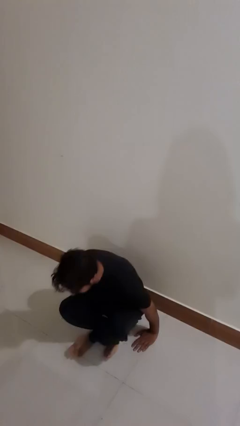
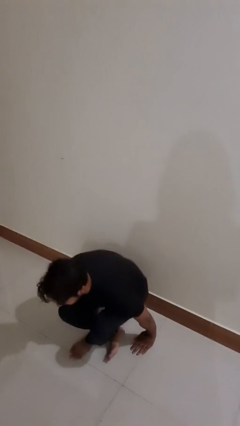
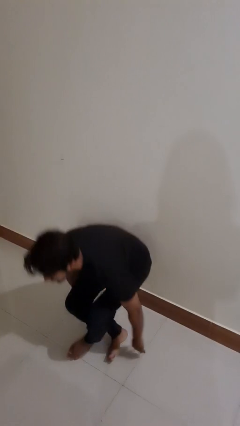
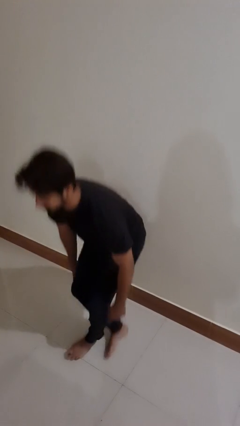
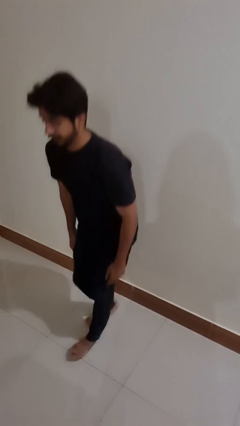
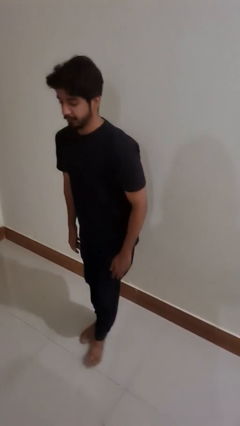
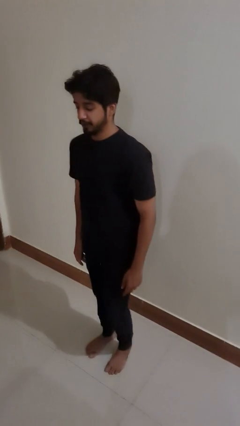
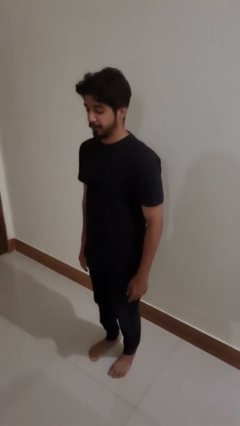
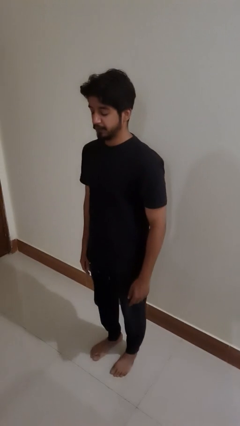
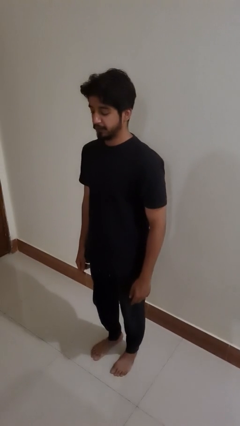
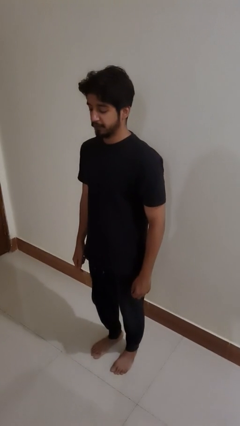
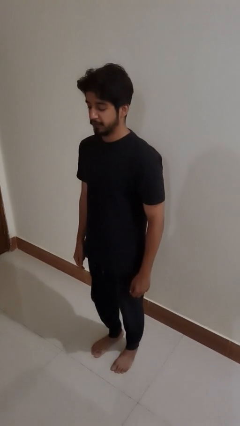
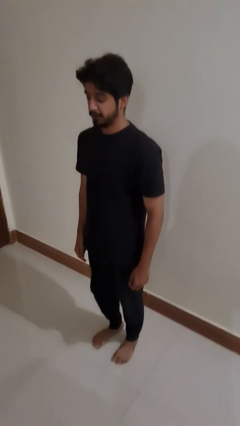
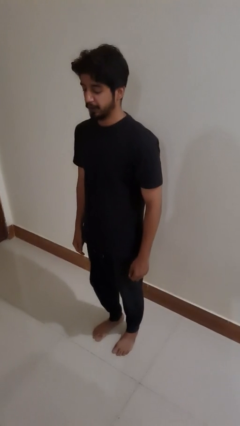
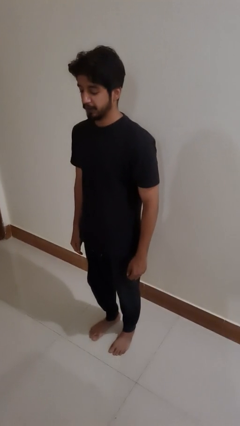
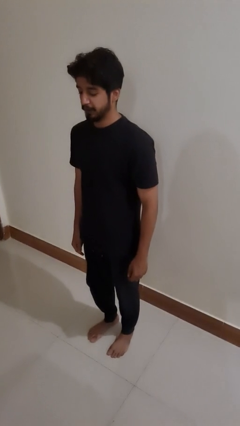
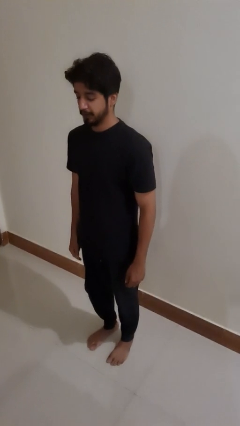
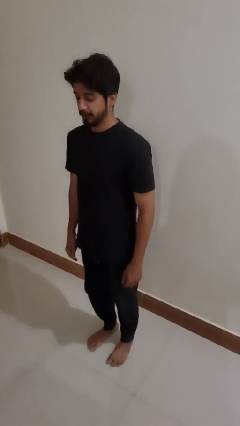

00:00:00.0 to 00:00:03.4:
person stands up from floor

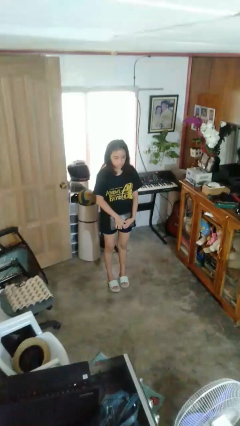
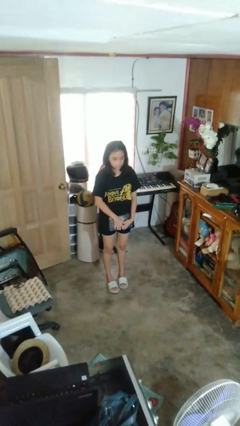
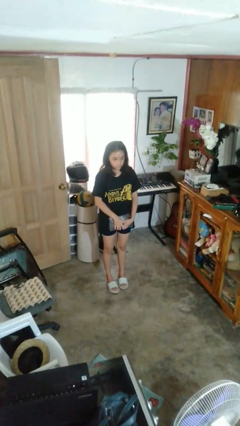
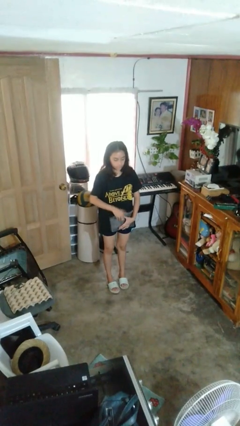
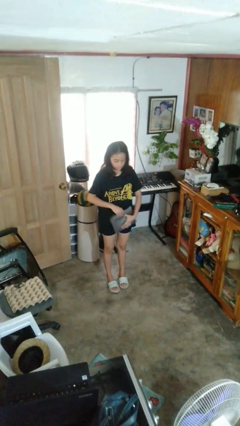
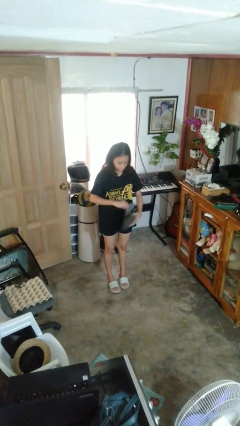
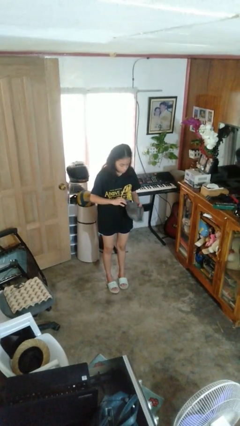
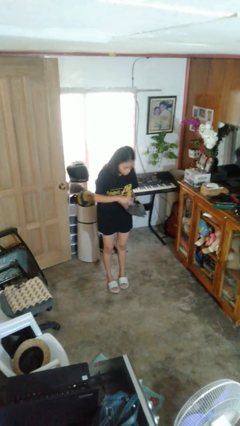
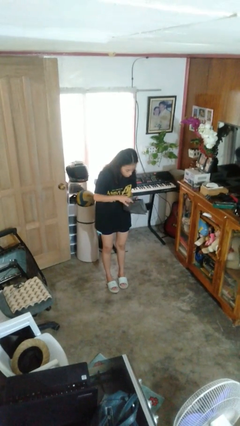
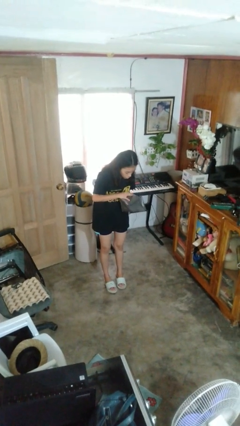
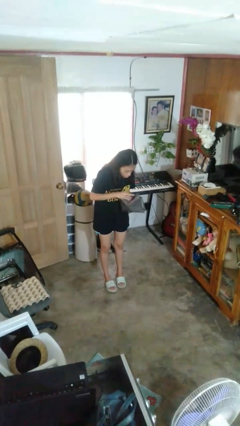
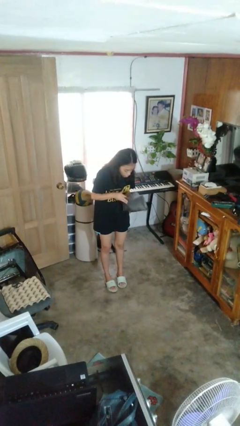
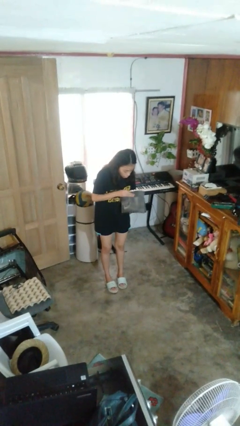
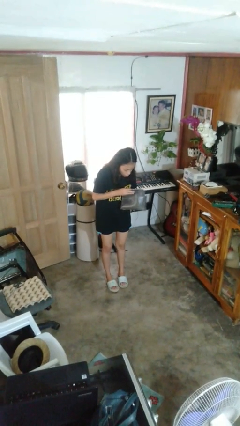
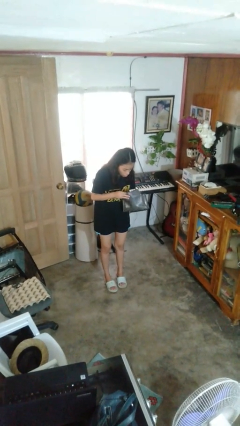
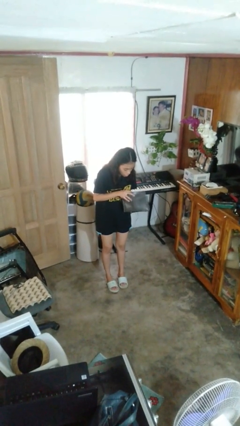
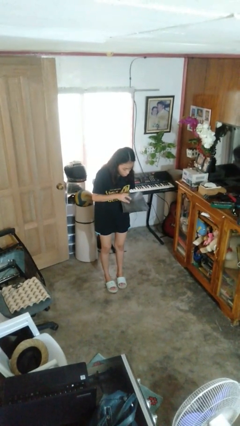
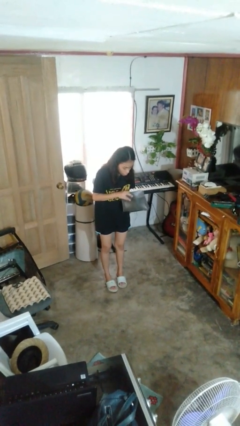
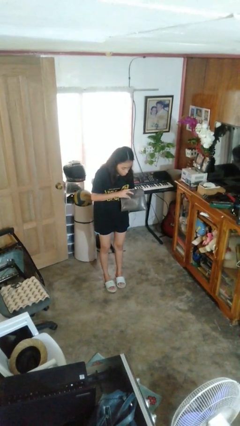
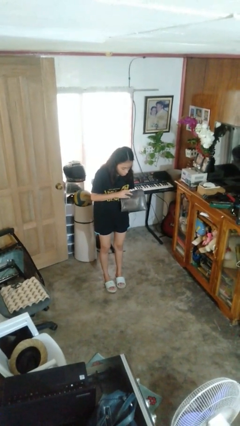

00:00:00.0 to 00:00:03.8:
person searches in purse

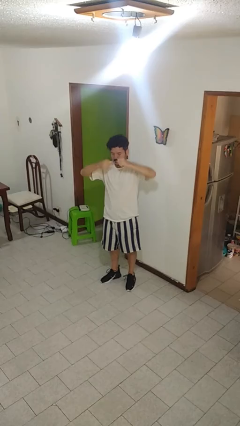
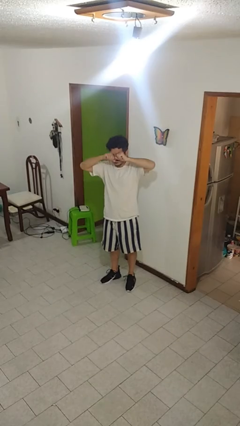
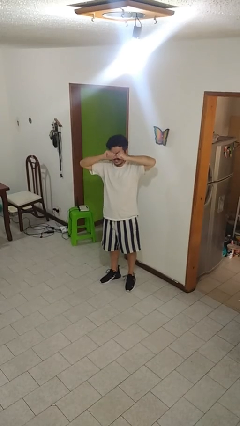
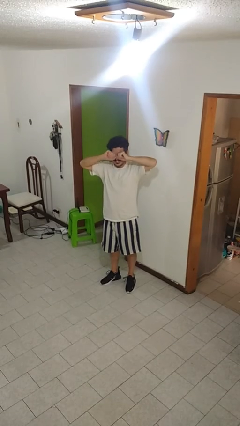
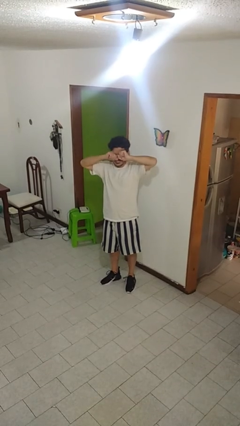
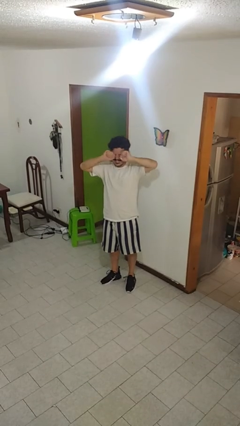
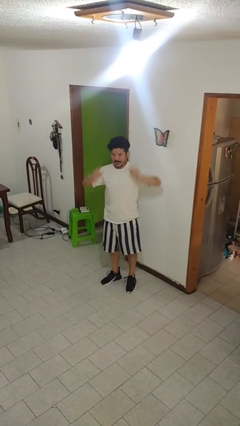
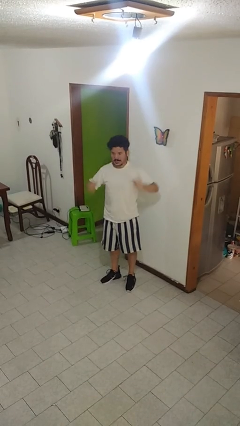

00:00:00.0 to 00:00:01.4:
person rubs eyes

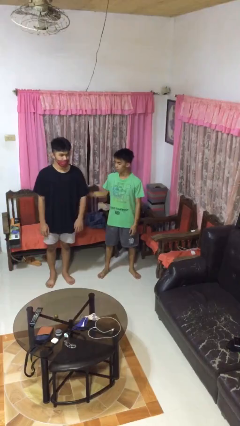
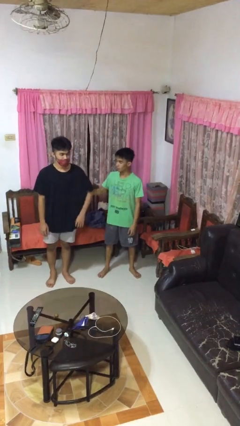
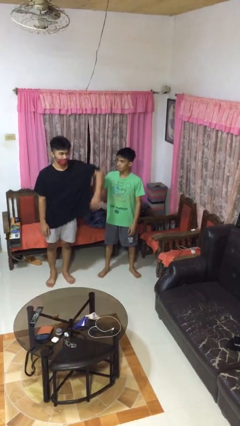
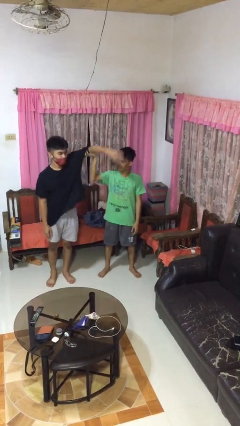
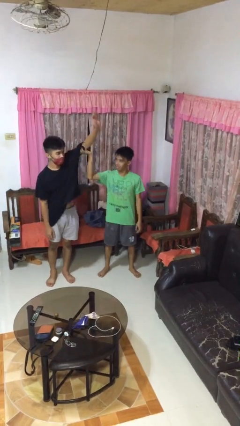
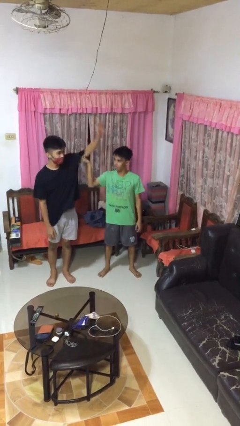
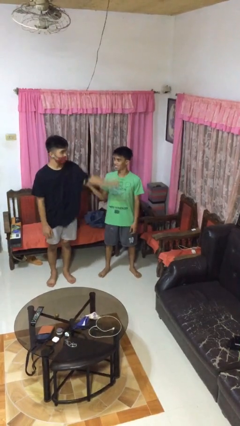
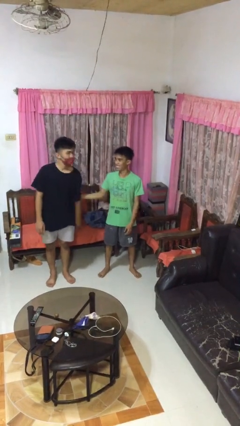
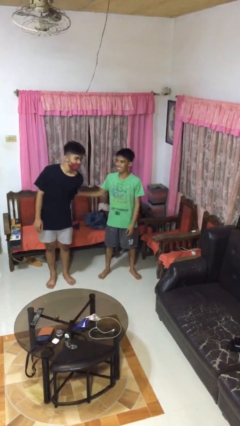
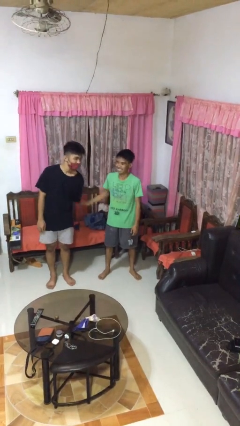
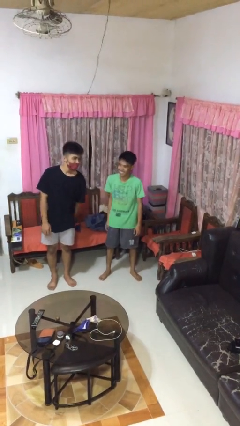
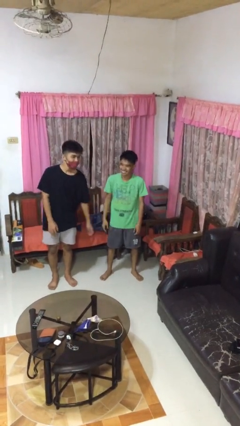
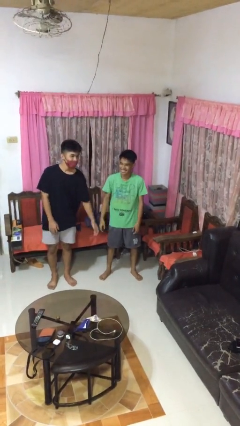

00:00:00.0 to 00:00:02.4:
person grabs person by bicep

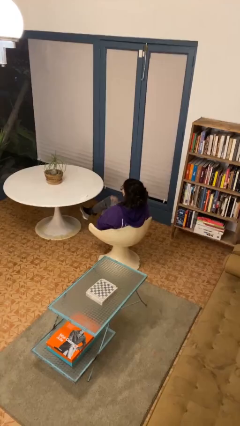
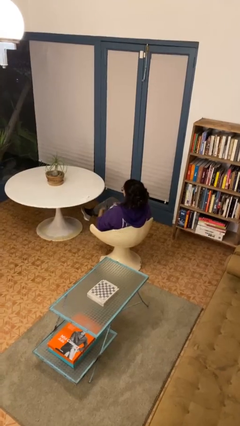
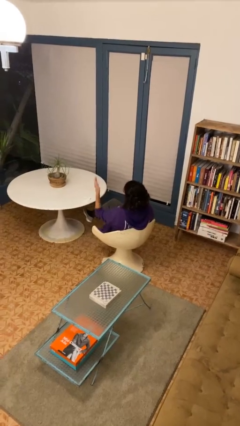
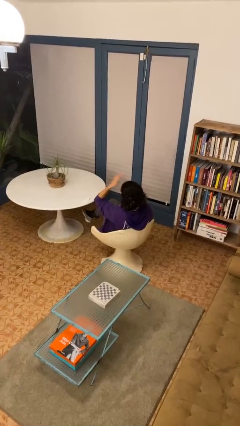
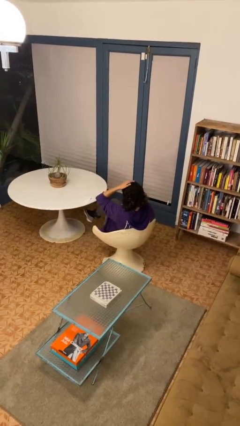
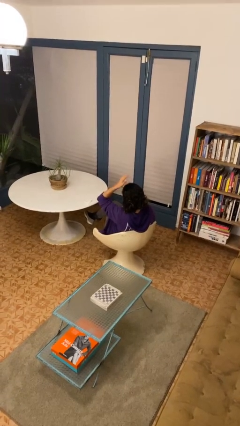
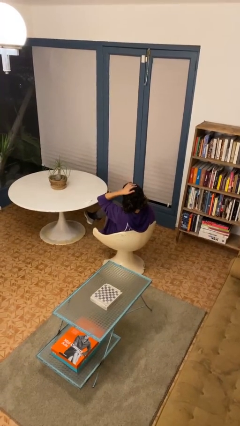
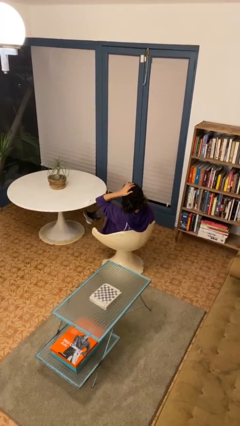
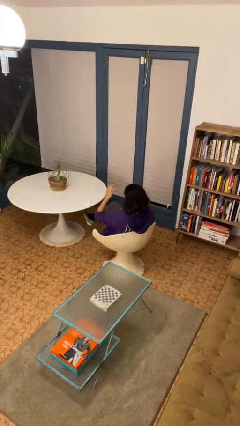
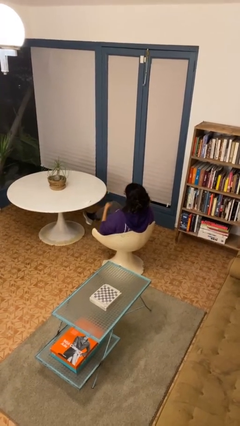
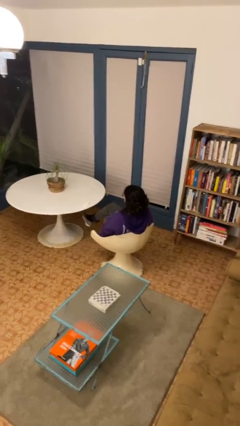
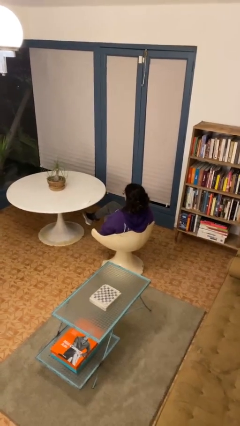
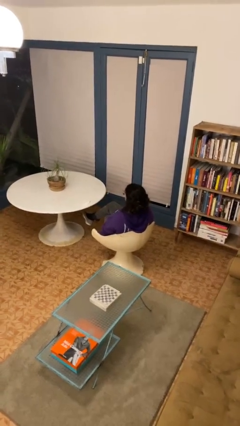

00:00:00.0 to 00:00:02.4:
person pats head

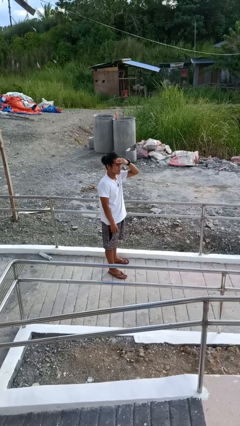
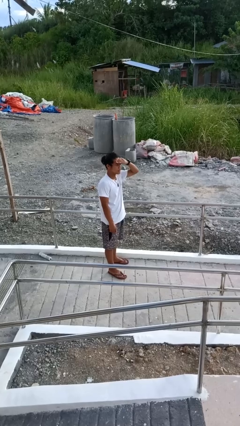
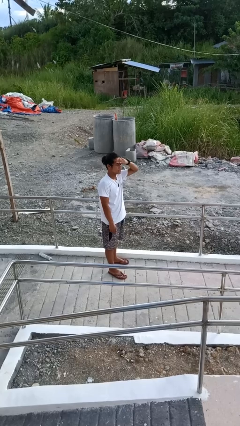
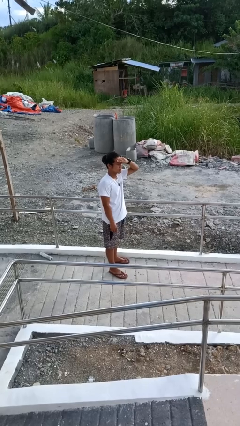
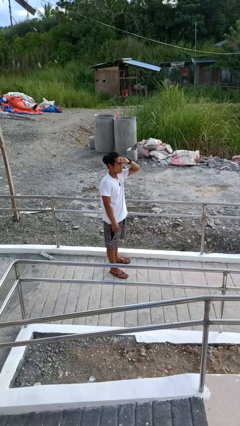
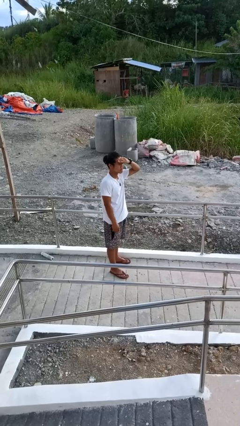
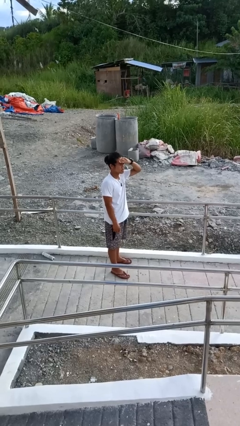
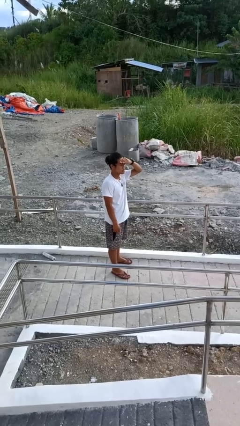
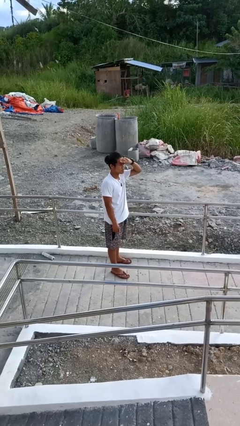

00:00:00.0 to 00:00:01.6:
person shades eyes

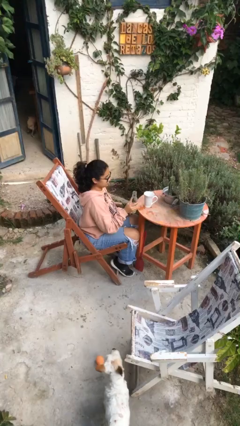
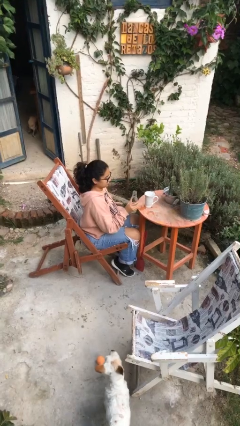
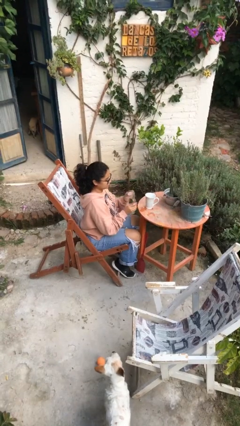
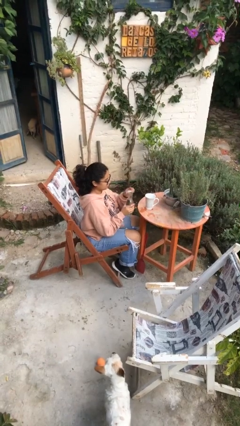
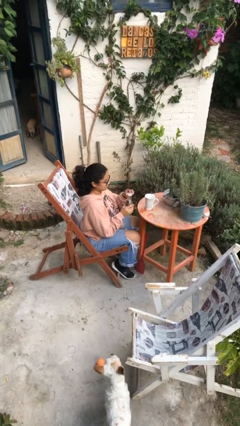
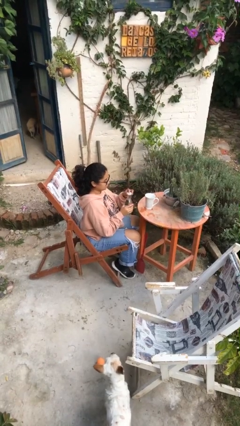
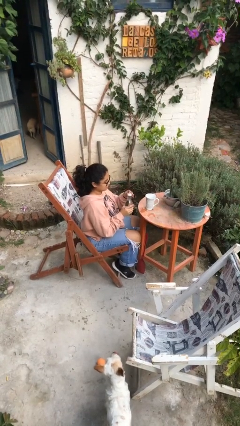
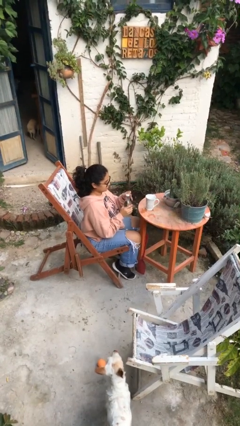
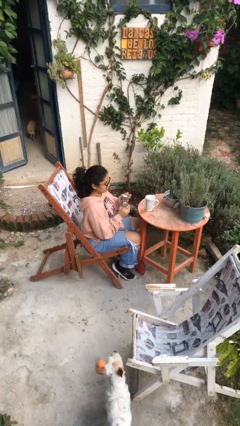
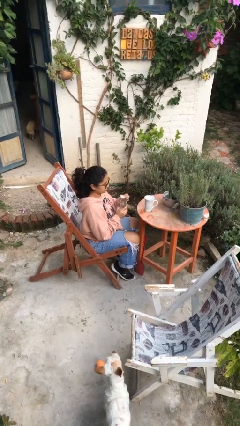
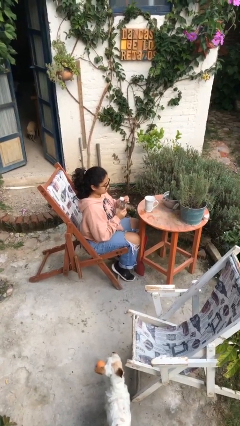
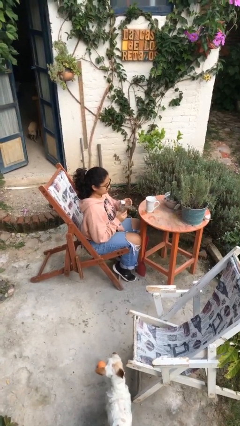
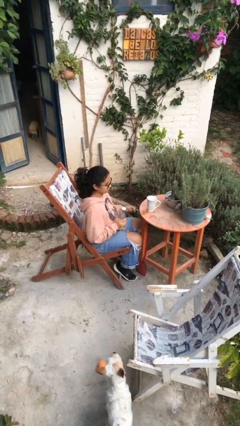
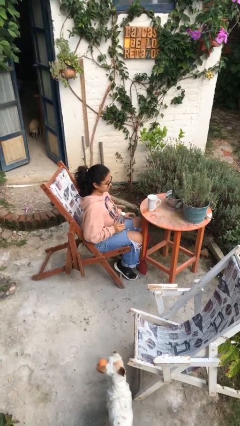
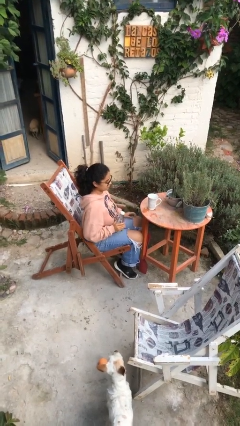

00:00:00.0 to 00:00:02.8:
person screws lid to bottle
